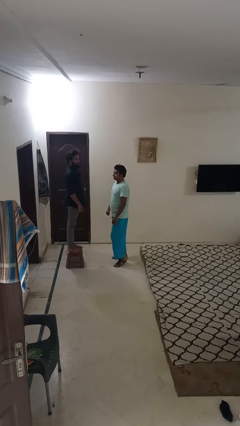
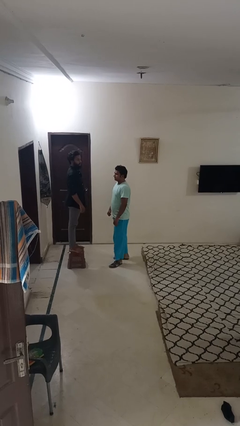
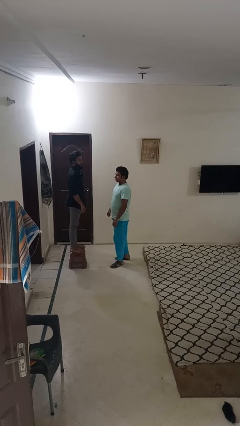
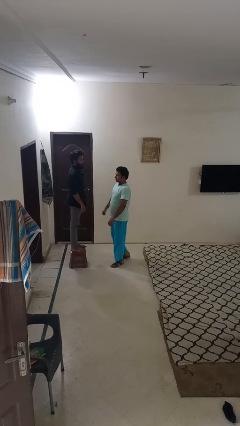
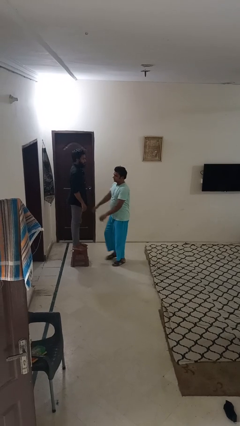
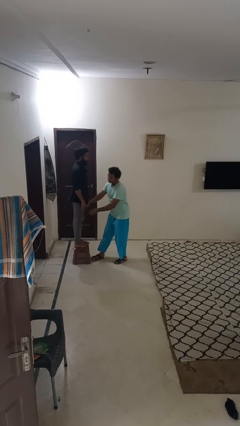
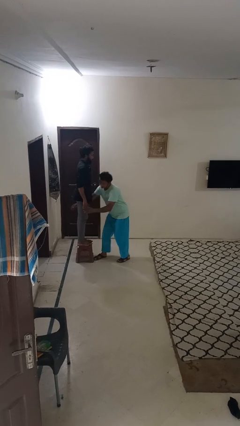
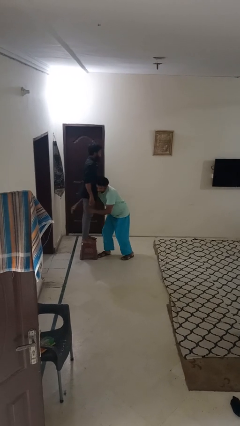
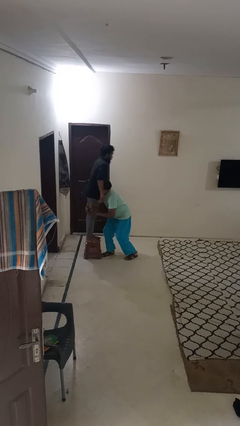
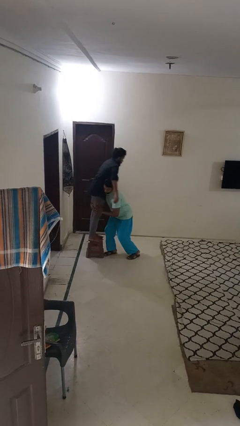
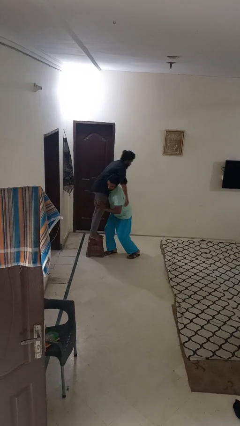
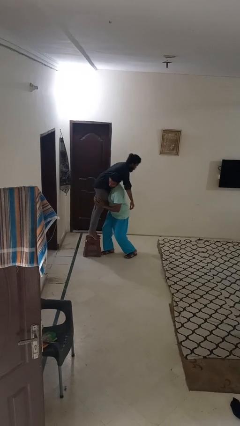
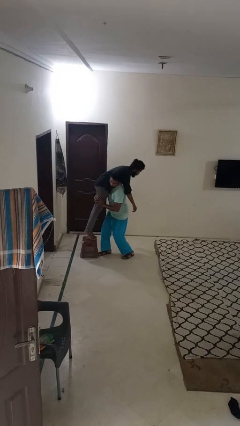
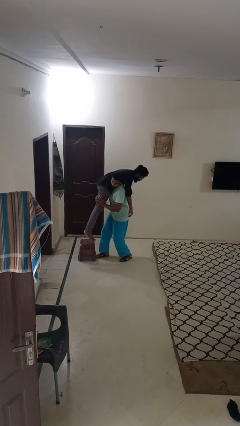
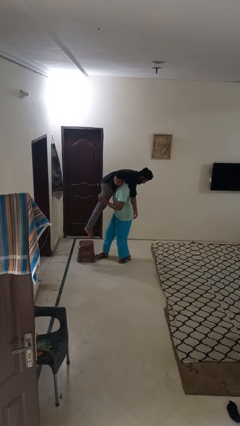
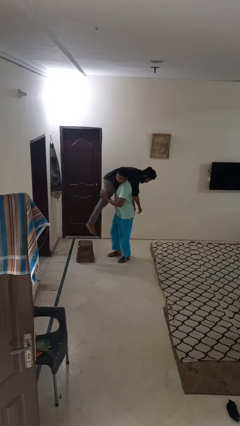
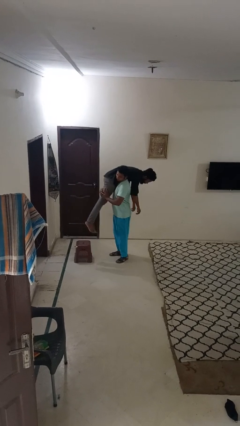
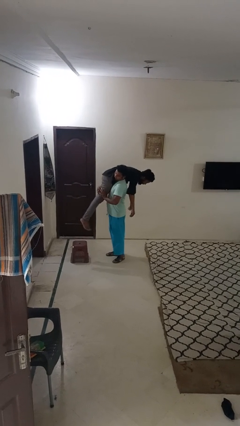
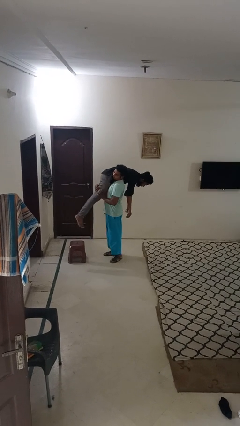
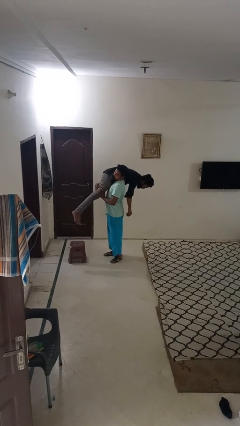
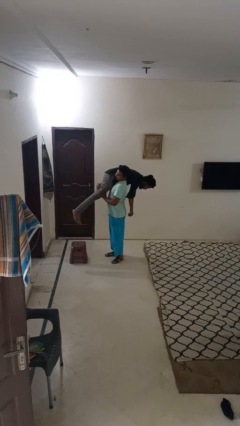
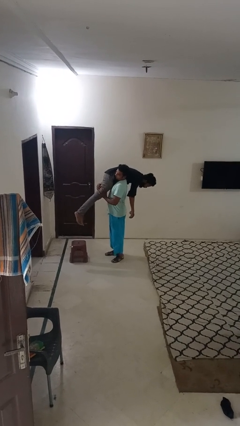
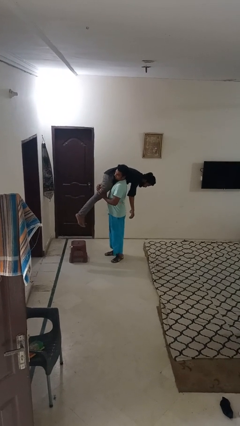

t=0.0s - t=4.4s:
person carries person over shoulder

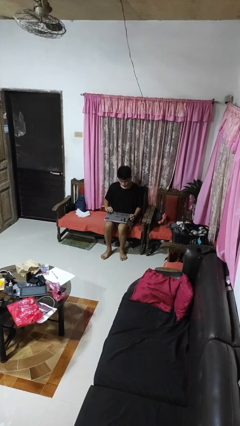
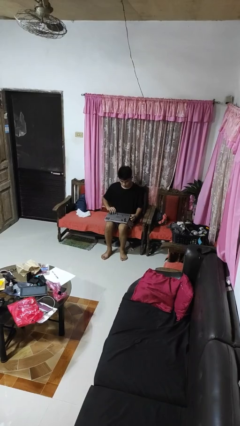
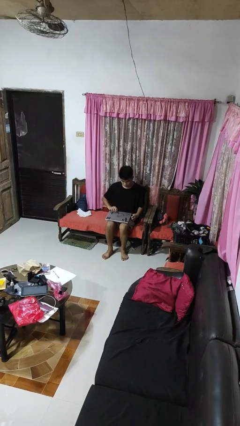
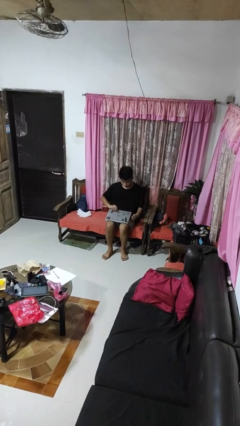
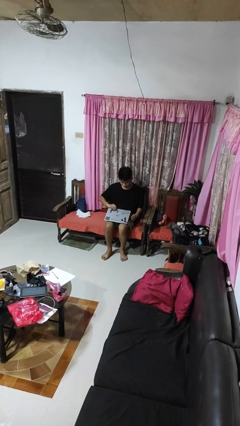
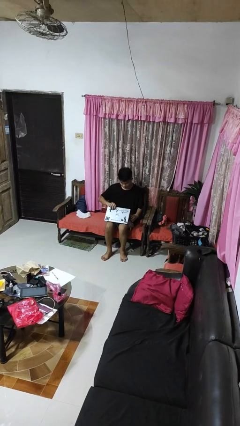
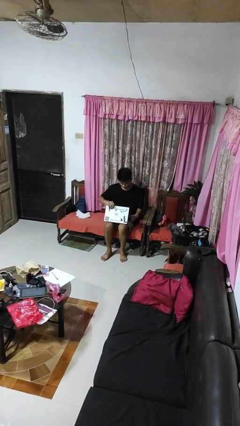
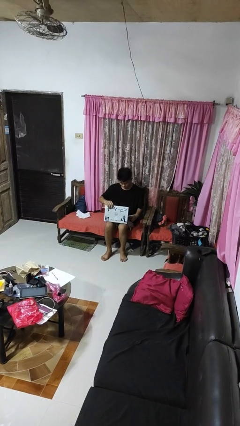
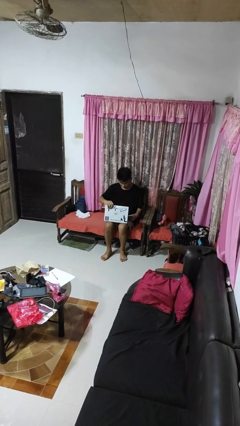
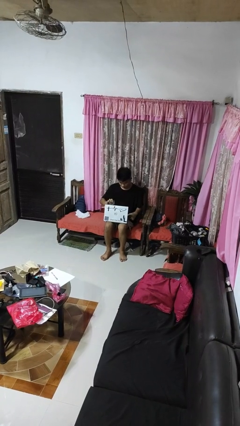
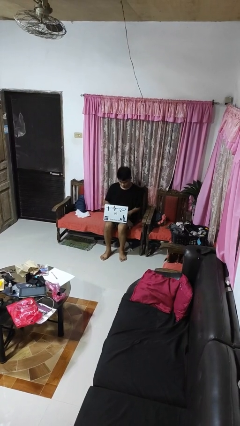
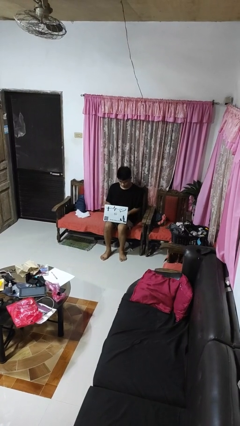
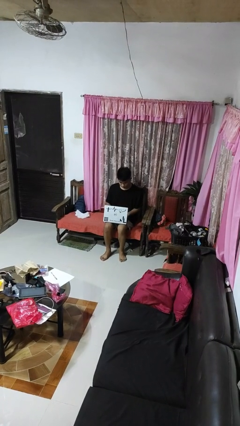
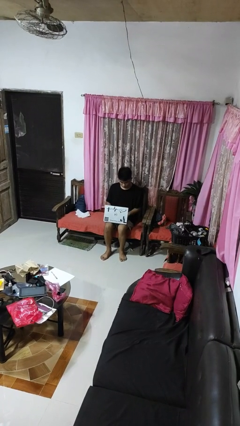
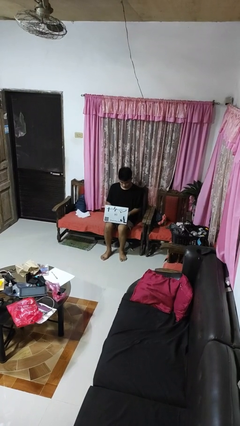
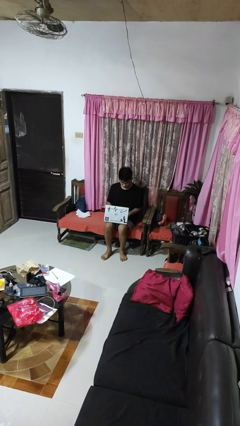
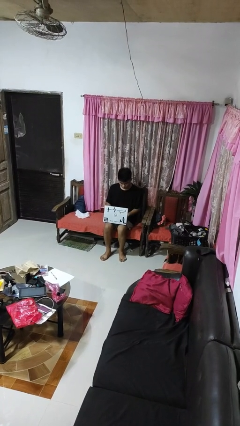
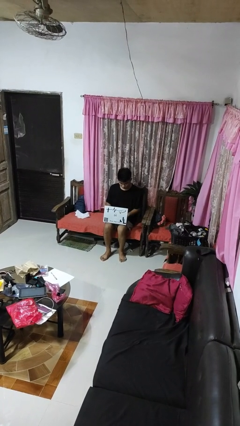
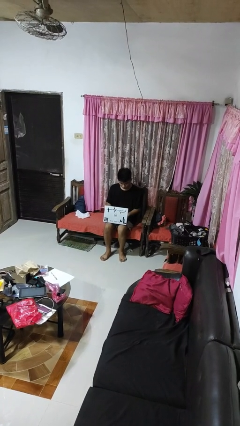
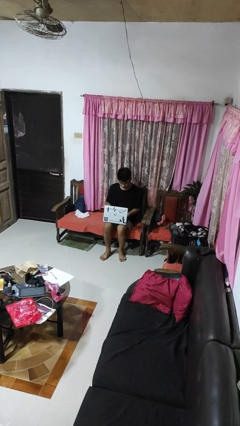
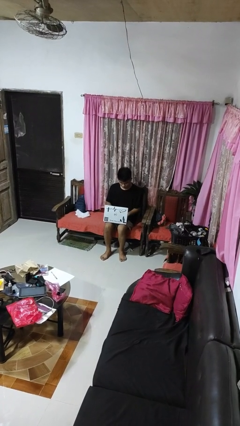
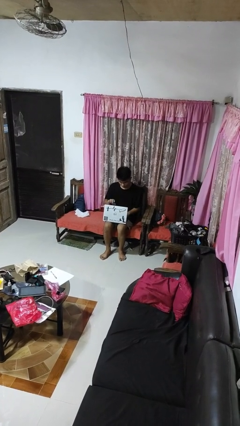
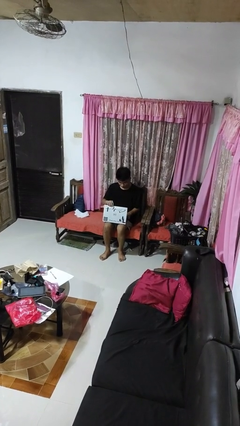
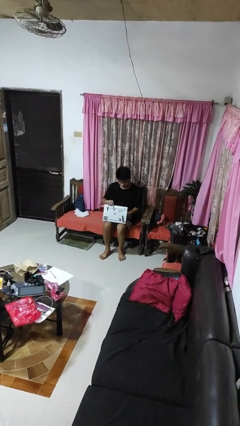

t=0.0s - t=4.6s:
person opens laptop

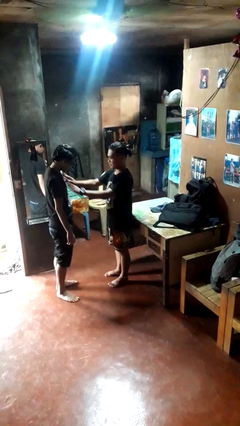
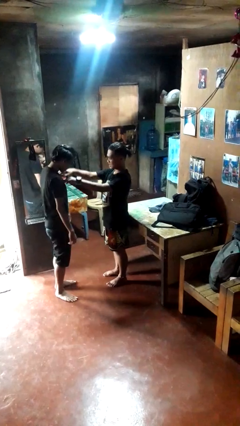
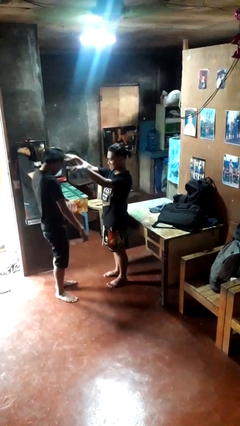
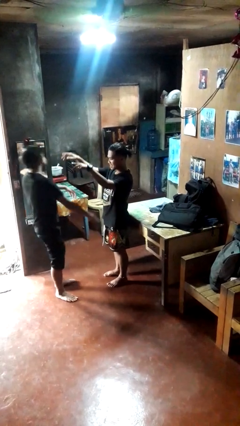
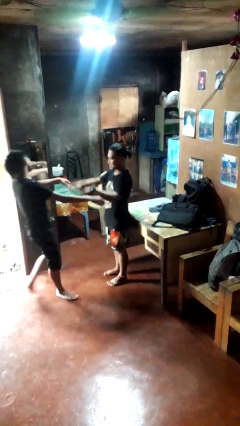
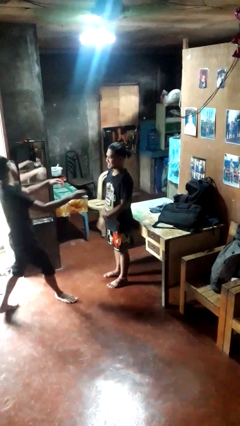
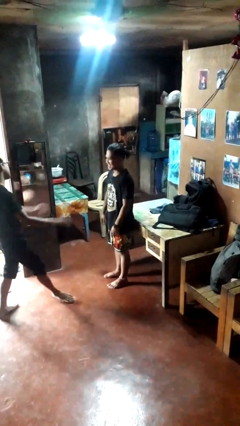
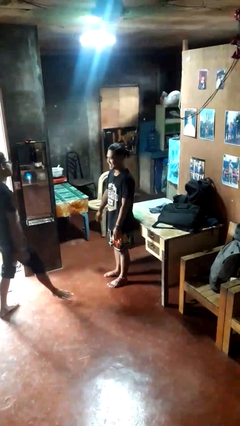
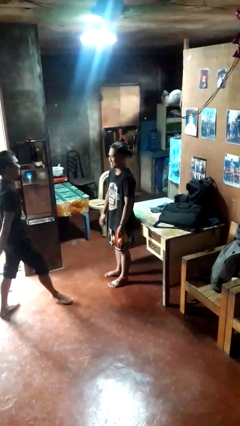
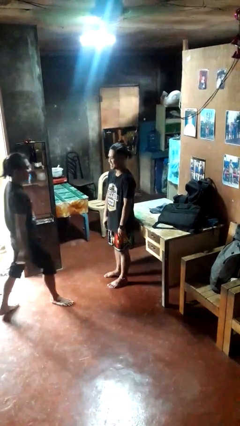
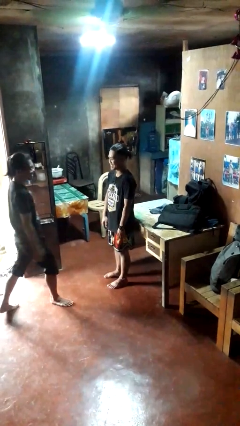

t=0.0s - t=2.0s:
person shoves person

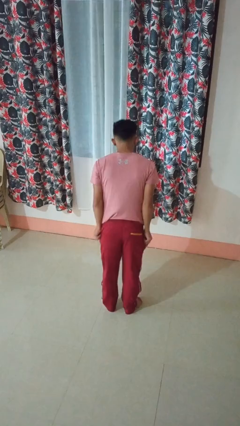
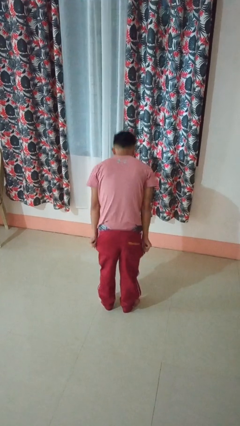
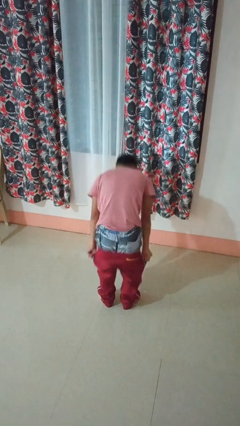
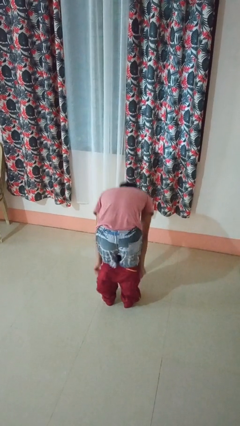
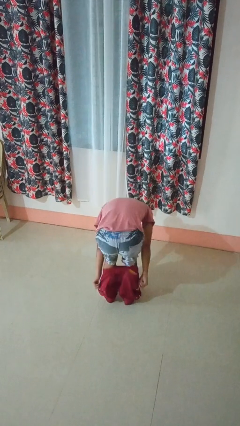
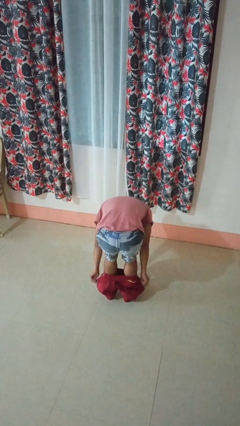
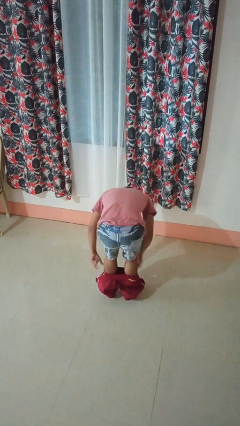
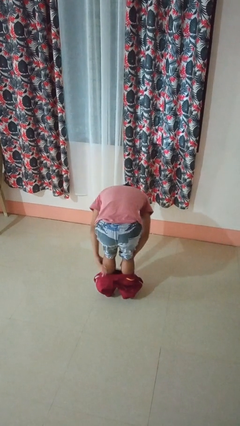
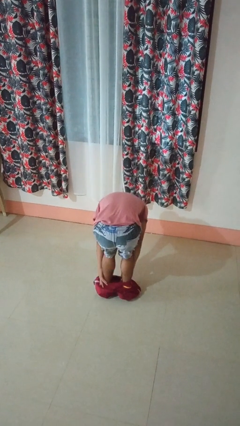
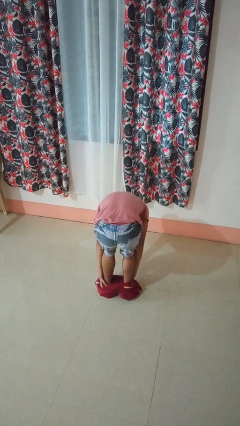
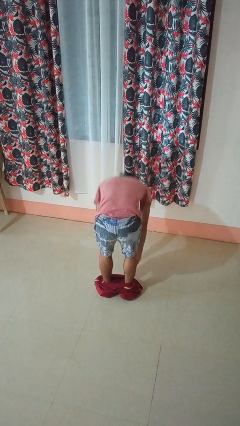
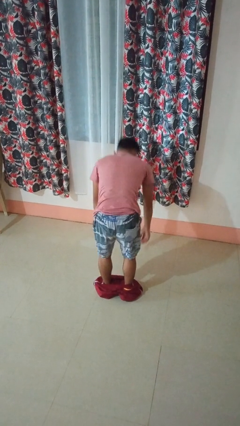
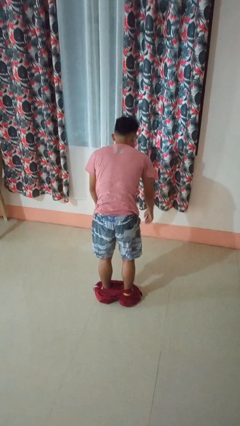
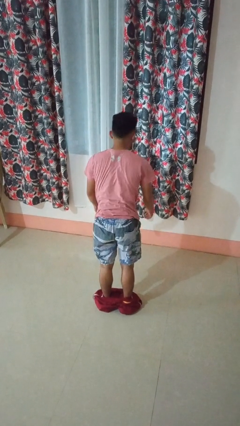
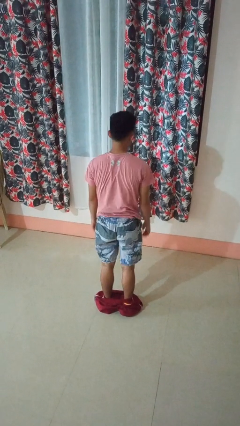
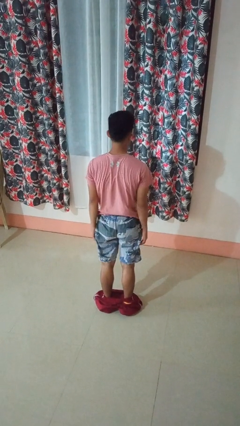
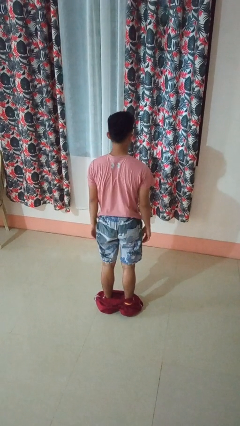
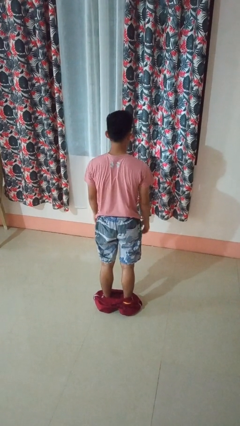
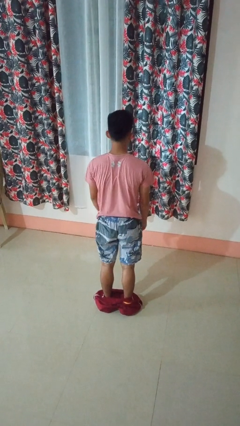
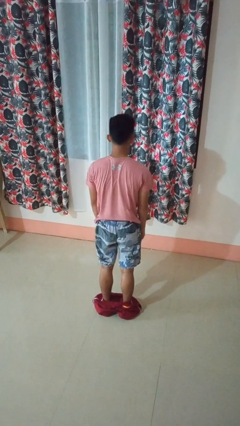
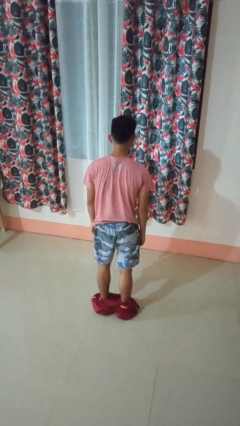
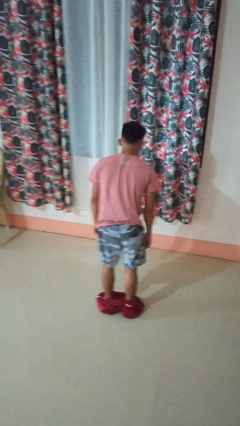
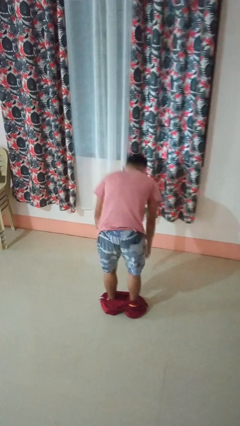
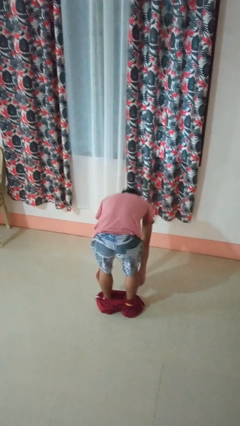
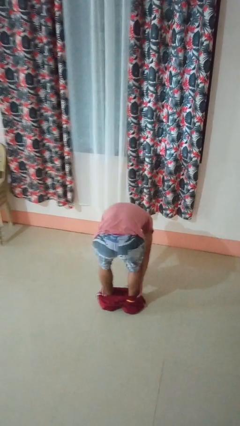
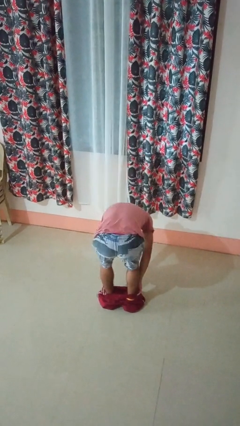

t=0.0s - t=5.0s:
person takes off pants

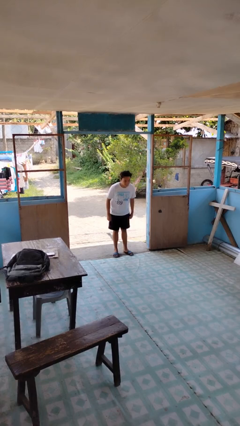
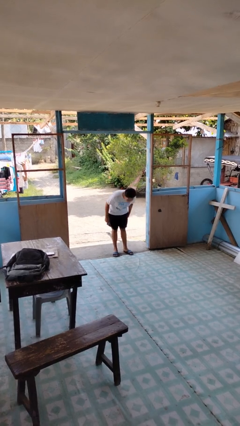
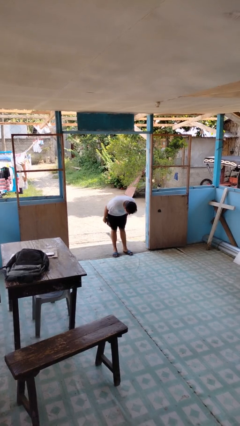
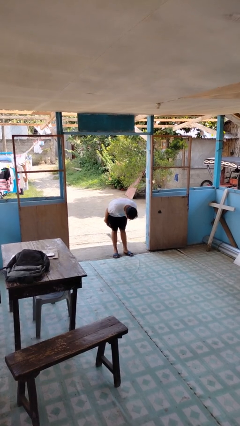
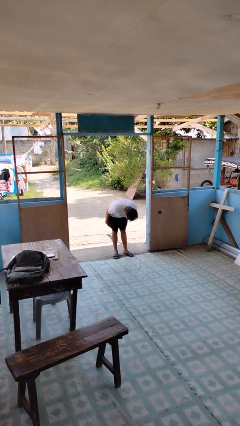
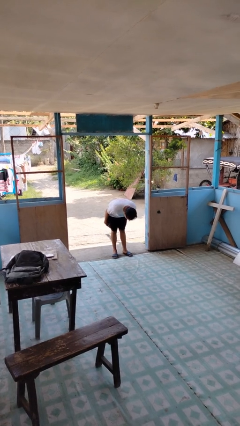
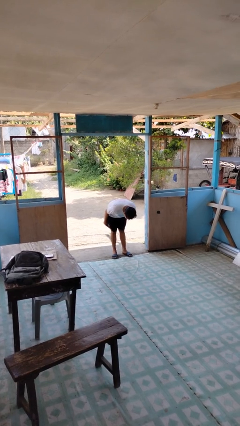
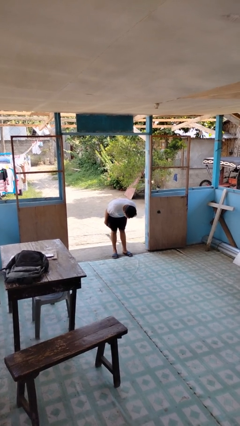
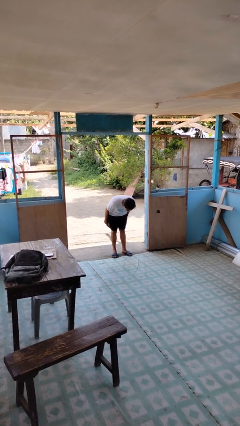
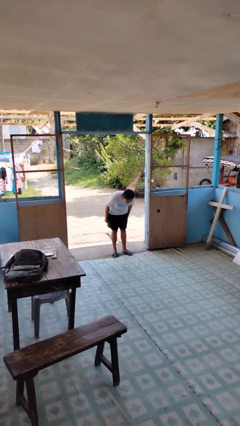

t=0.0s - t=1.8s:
person bows
